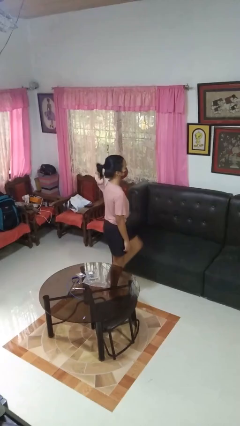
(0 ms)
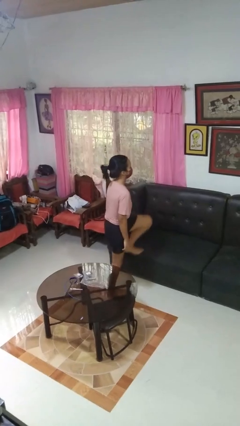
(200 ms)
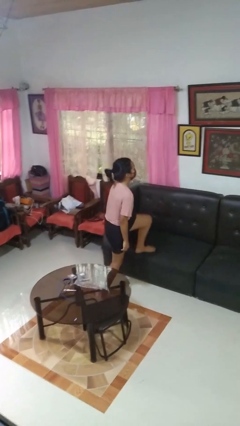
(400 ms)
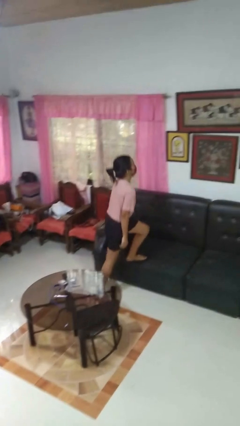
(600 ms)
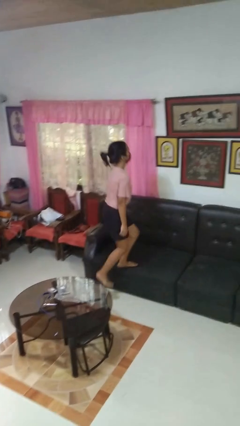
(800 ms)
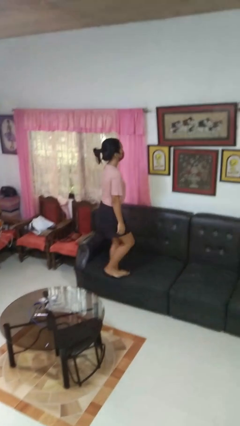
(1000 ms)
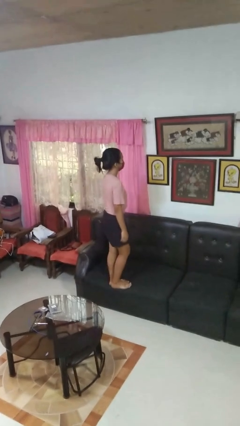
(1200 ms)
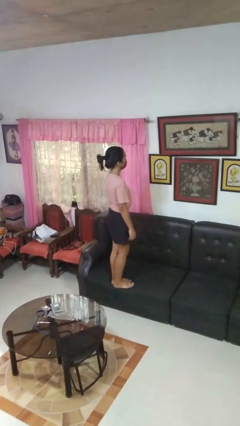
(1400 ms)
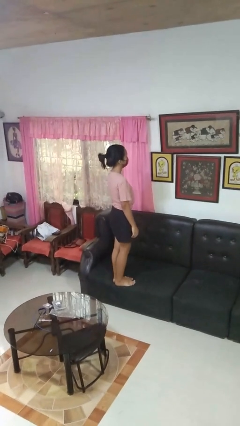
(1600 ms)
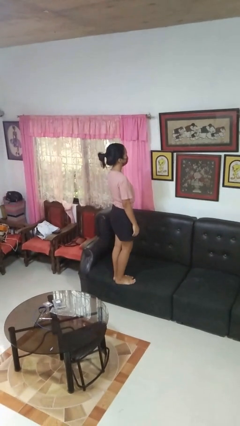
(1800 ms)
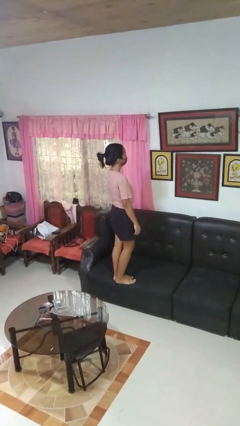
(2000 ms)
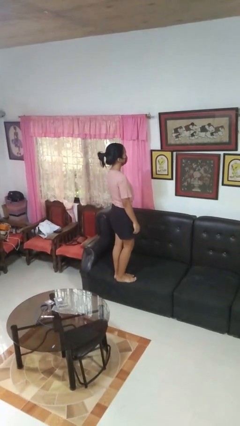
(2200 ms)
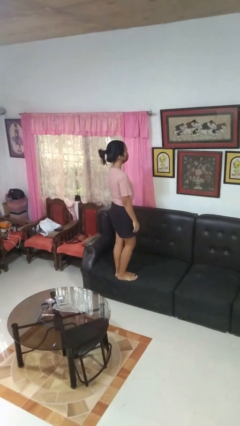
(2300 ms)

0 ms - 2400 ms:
person climbs on couch

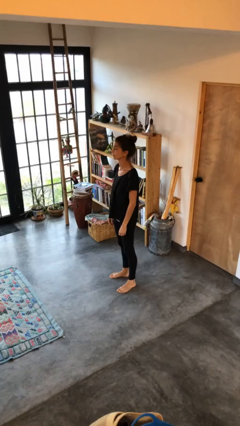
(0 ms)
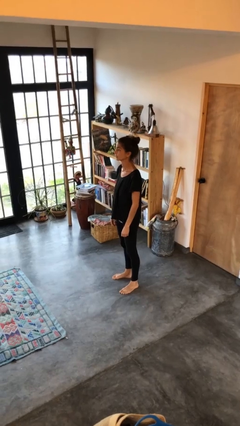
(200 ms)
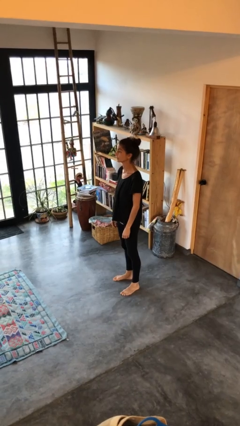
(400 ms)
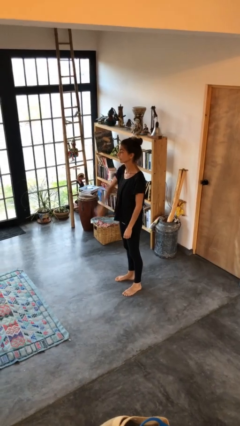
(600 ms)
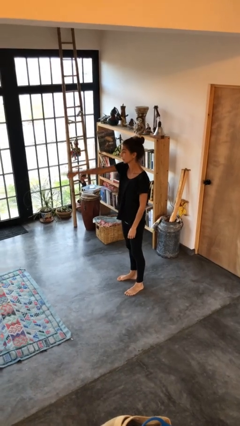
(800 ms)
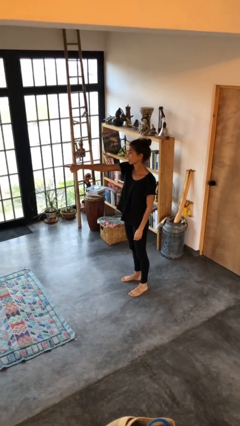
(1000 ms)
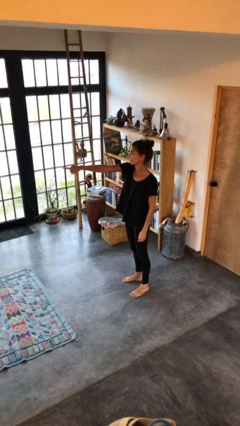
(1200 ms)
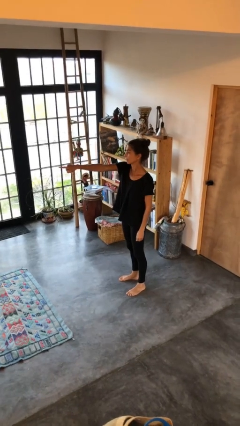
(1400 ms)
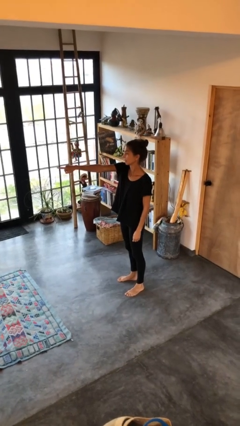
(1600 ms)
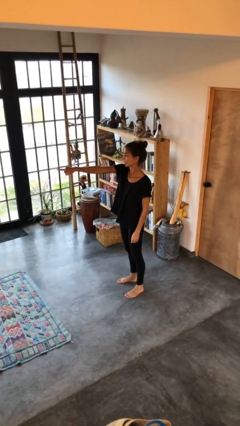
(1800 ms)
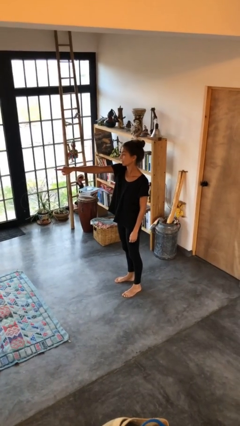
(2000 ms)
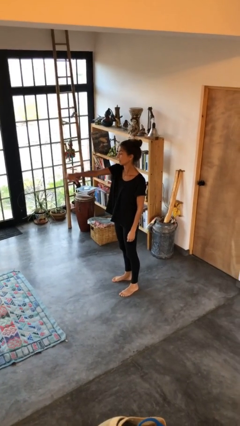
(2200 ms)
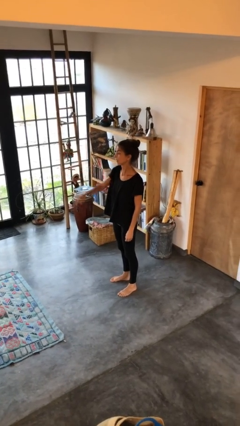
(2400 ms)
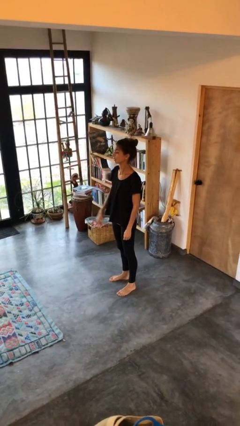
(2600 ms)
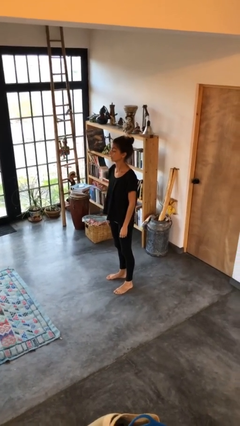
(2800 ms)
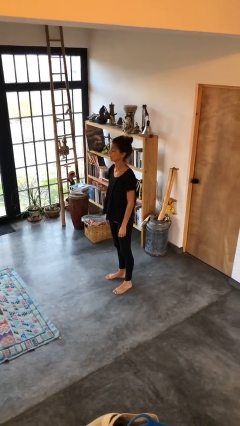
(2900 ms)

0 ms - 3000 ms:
person points at person

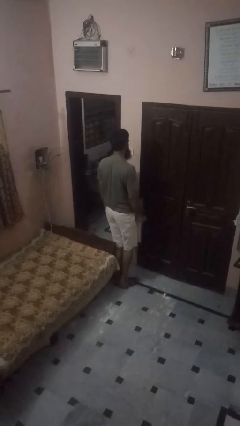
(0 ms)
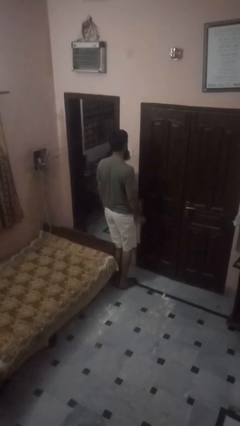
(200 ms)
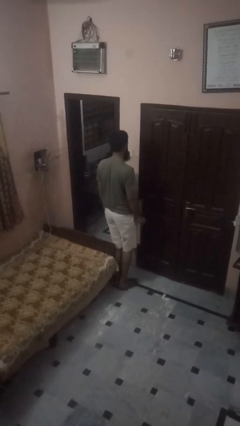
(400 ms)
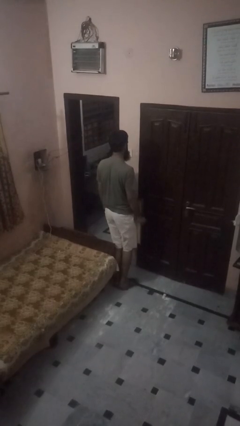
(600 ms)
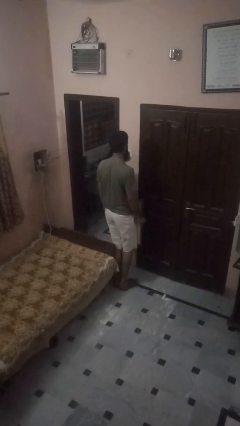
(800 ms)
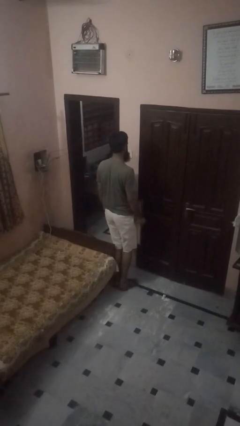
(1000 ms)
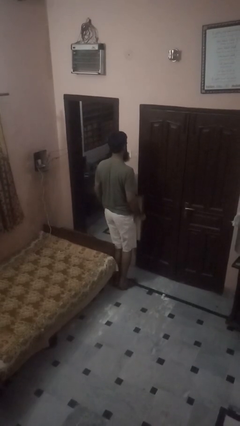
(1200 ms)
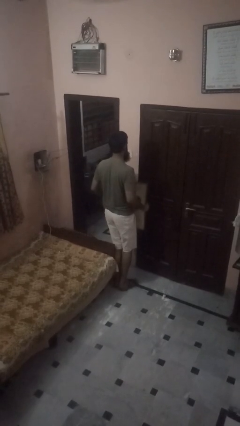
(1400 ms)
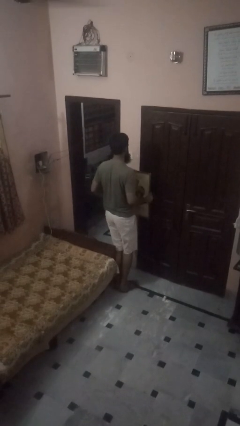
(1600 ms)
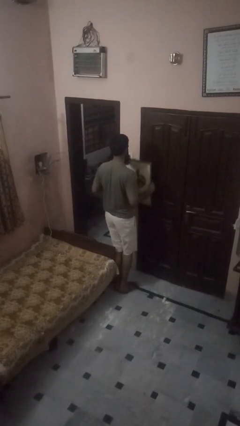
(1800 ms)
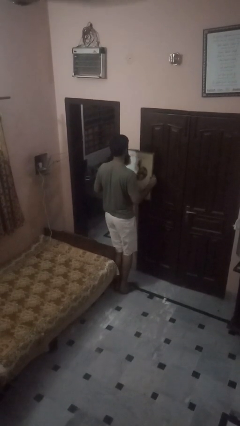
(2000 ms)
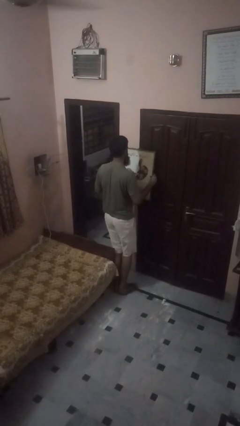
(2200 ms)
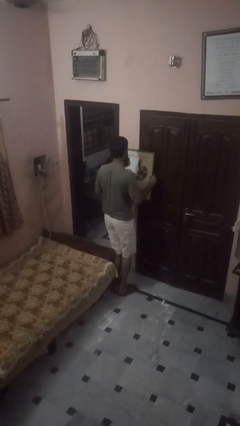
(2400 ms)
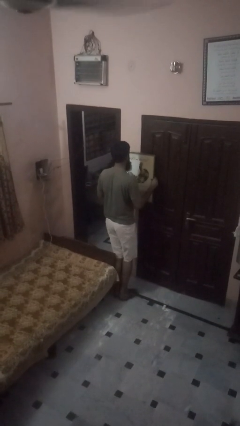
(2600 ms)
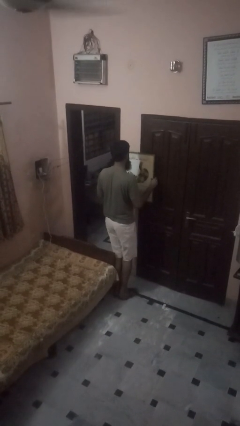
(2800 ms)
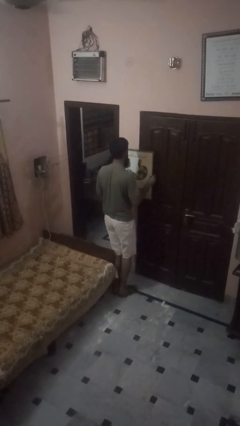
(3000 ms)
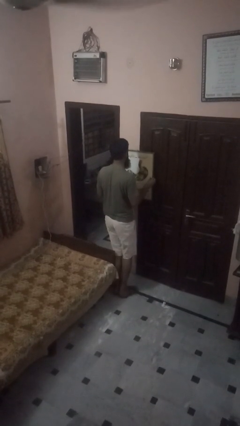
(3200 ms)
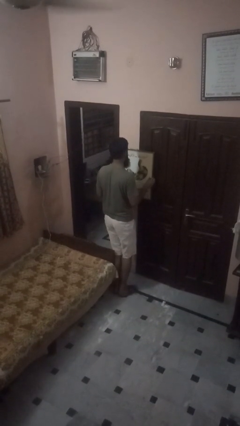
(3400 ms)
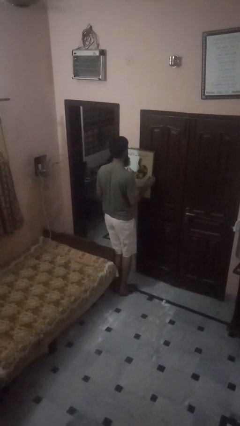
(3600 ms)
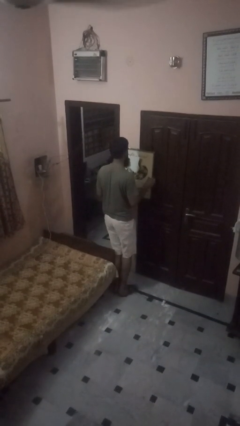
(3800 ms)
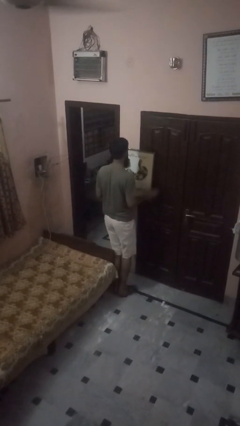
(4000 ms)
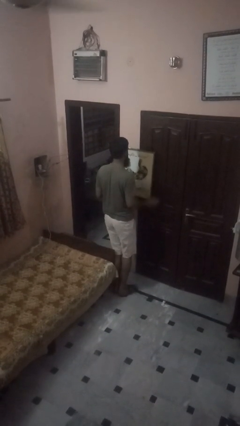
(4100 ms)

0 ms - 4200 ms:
person puts up picture frame

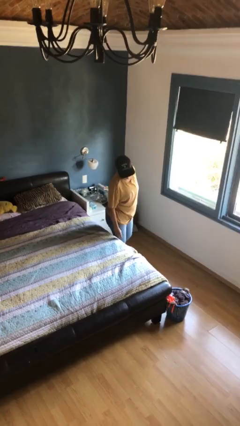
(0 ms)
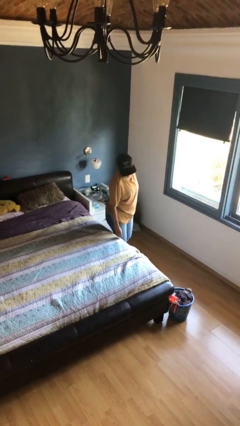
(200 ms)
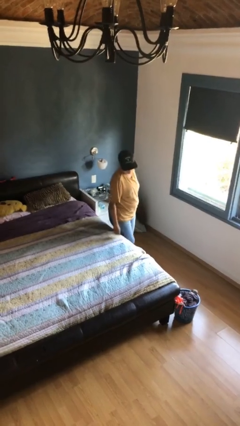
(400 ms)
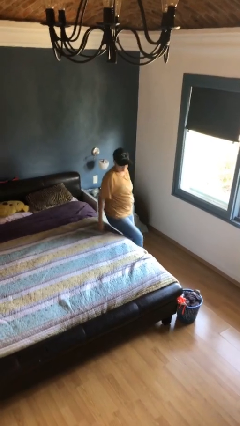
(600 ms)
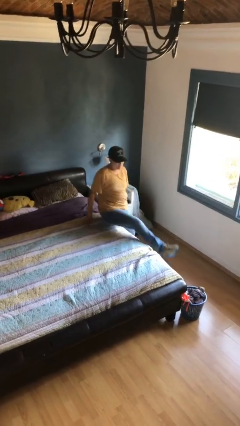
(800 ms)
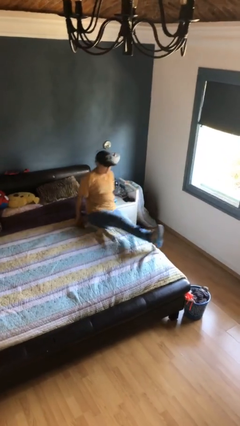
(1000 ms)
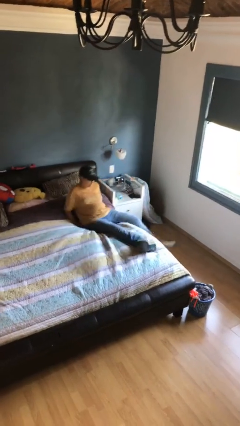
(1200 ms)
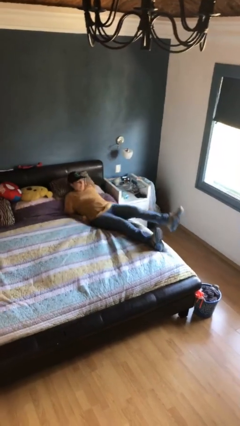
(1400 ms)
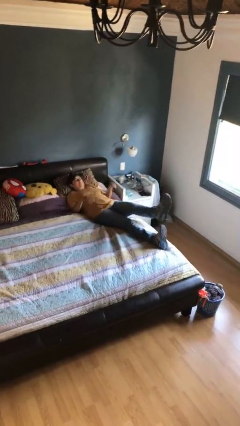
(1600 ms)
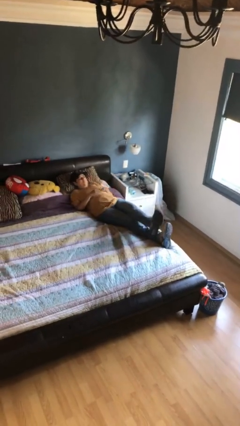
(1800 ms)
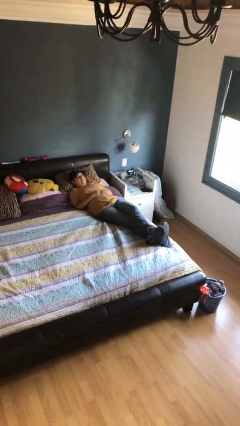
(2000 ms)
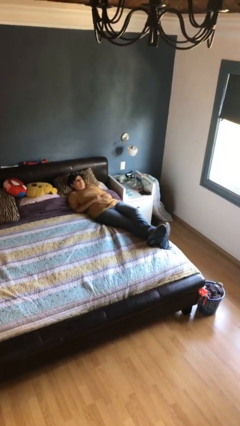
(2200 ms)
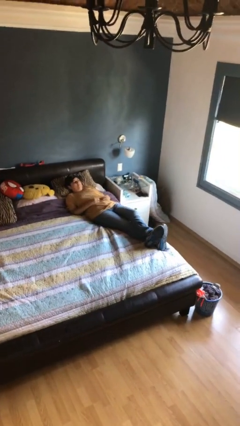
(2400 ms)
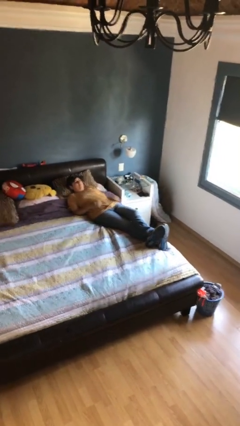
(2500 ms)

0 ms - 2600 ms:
person lies down on bed

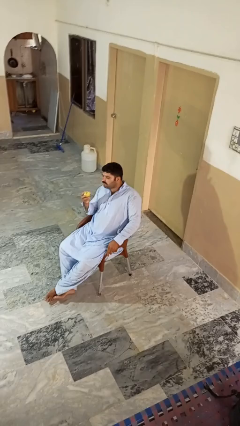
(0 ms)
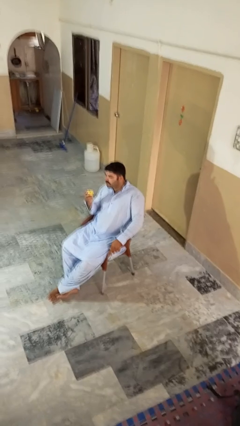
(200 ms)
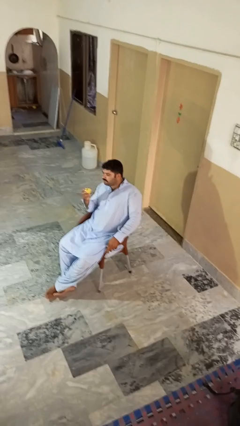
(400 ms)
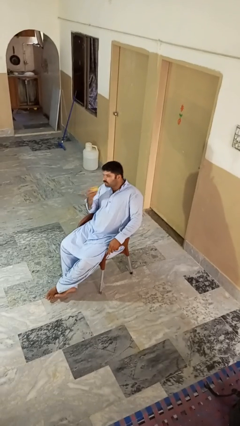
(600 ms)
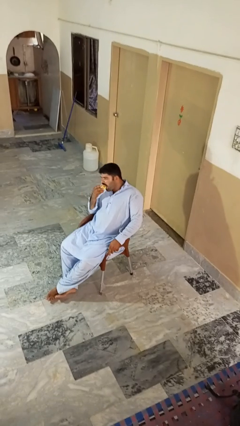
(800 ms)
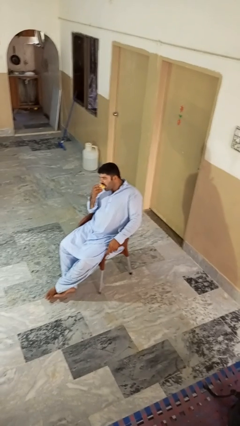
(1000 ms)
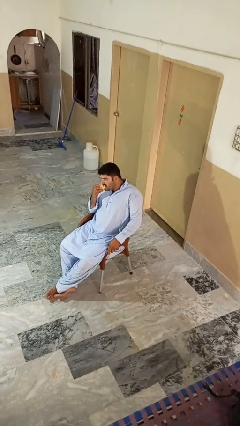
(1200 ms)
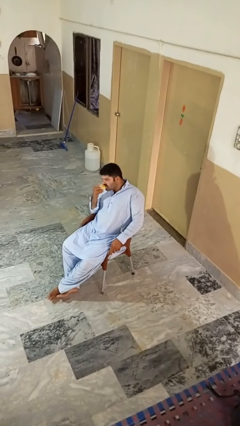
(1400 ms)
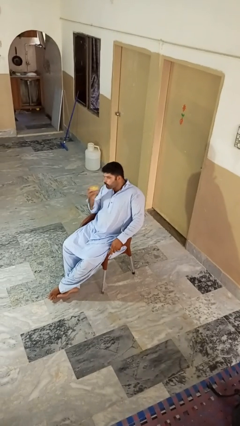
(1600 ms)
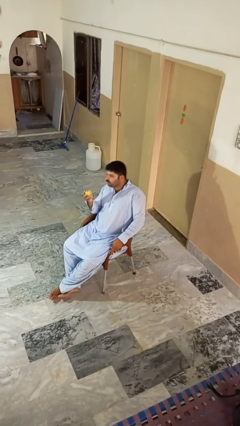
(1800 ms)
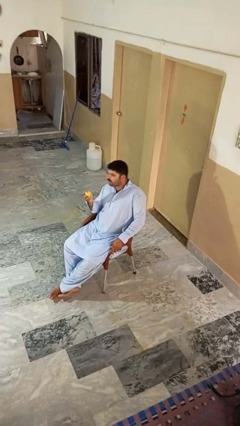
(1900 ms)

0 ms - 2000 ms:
person eats apple

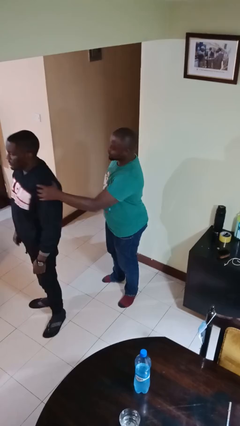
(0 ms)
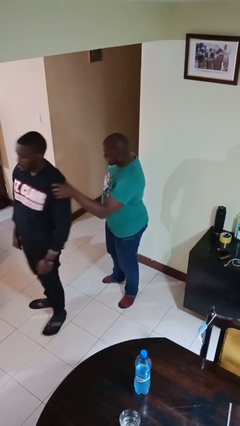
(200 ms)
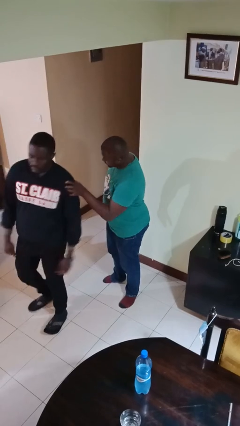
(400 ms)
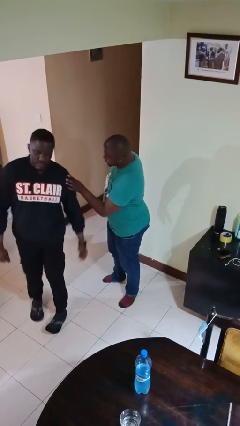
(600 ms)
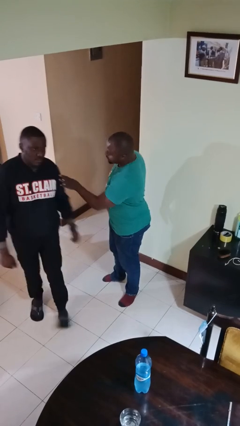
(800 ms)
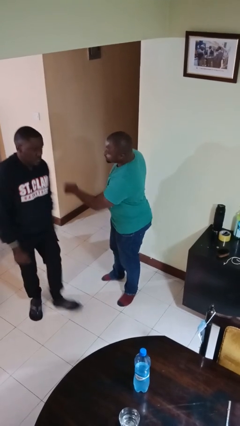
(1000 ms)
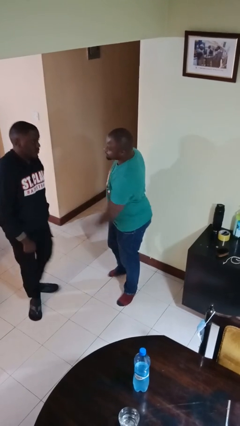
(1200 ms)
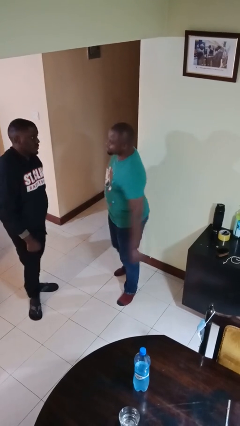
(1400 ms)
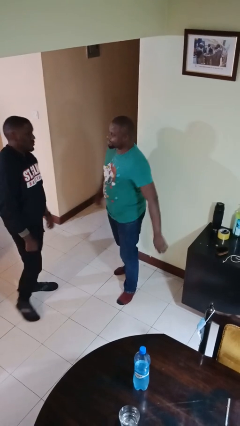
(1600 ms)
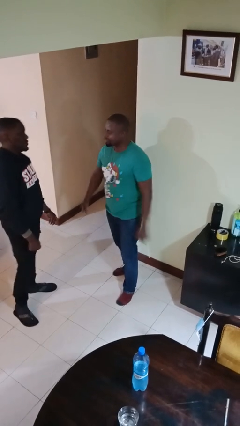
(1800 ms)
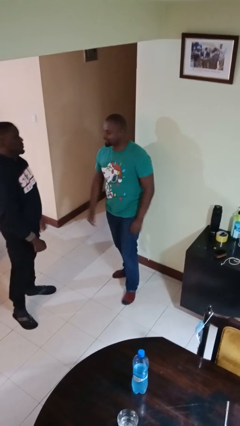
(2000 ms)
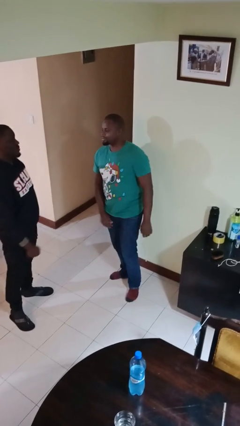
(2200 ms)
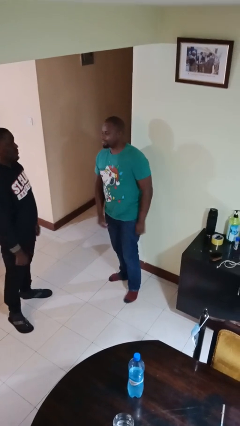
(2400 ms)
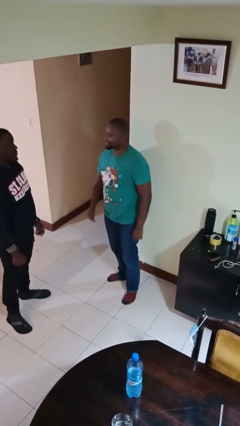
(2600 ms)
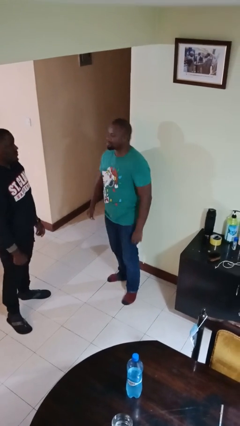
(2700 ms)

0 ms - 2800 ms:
person spins person around
